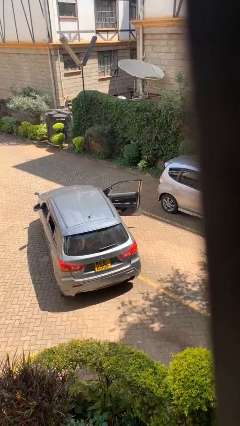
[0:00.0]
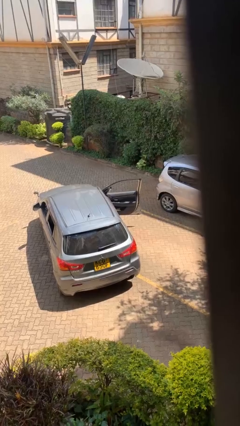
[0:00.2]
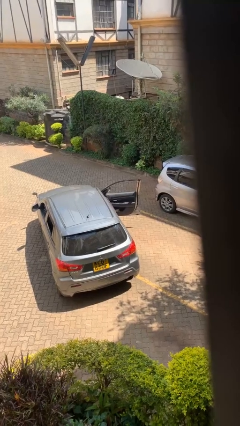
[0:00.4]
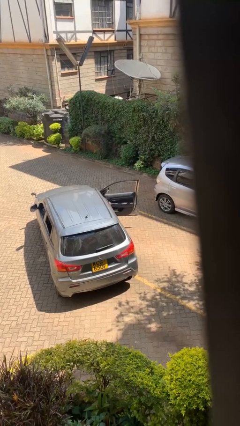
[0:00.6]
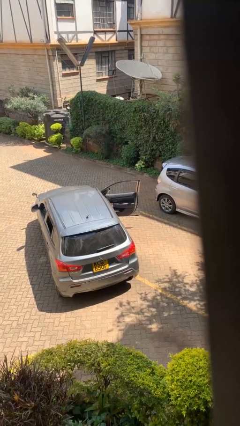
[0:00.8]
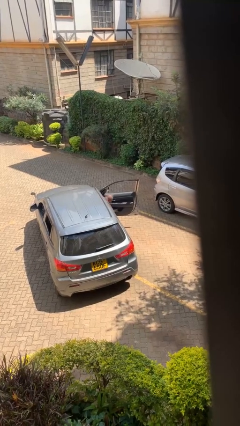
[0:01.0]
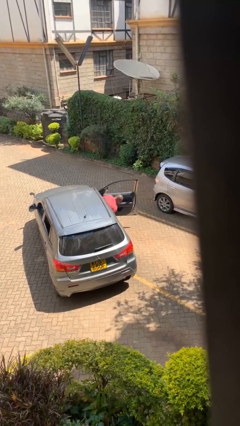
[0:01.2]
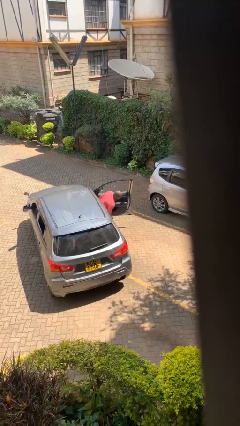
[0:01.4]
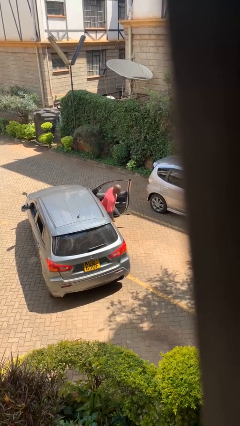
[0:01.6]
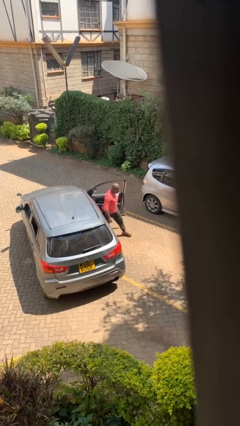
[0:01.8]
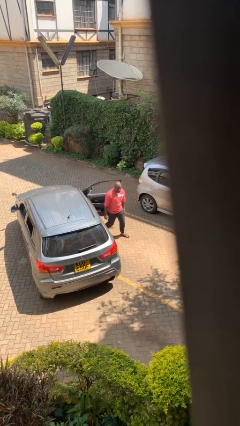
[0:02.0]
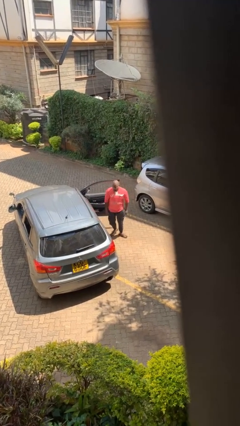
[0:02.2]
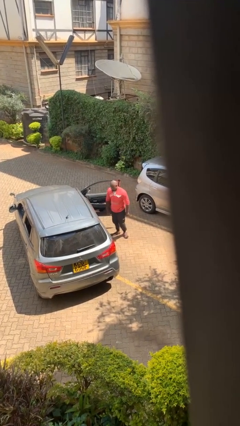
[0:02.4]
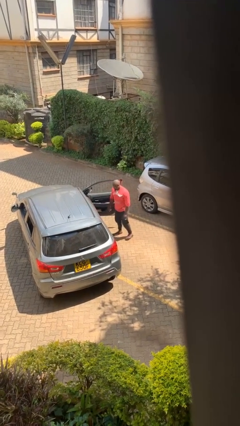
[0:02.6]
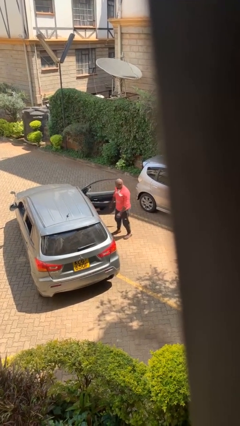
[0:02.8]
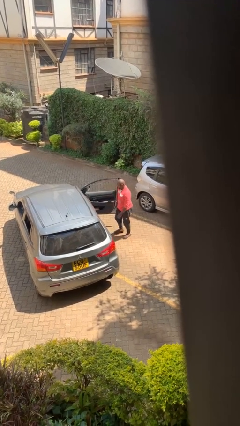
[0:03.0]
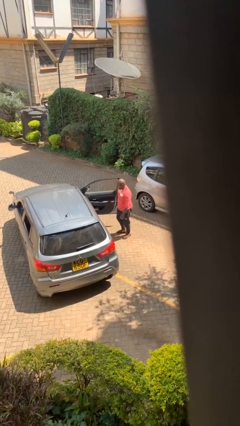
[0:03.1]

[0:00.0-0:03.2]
person exits car

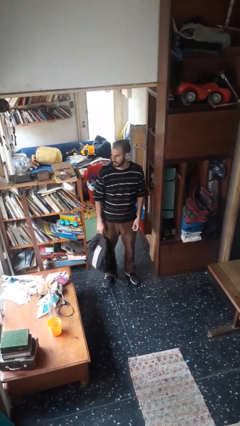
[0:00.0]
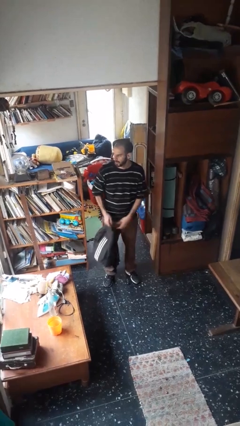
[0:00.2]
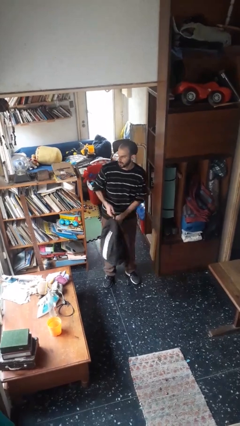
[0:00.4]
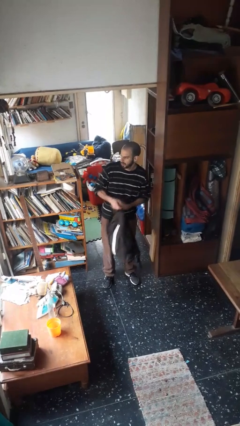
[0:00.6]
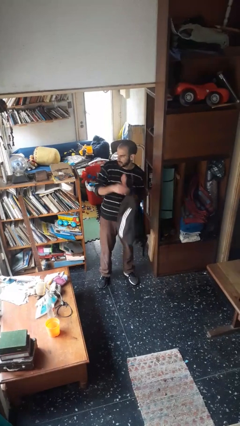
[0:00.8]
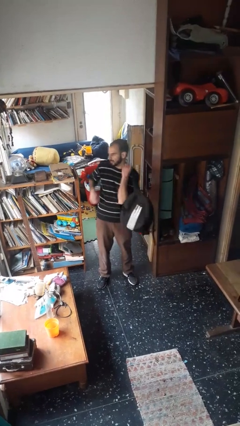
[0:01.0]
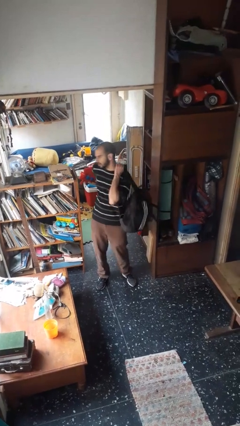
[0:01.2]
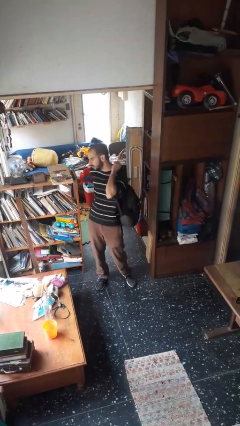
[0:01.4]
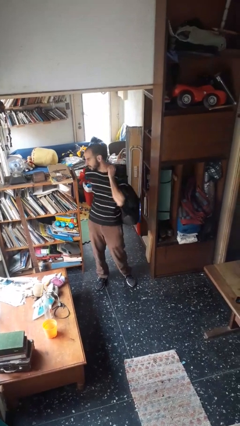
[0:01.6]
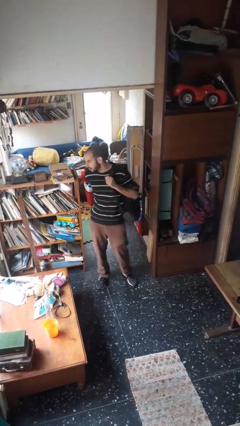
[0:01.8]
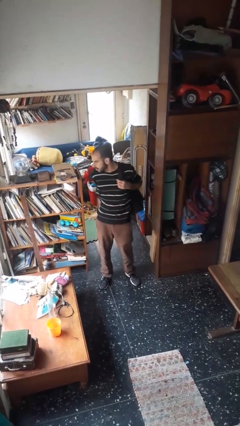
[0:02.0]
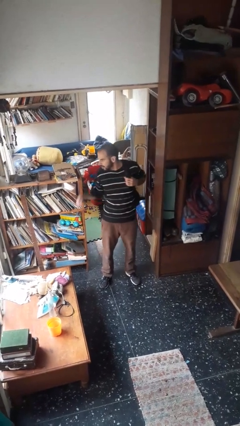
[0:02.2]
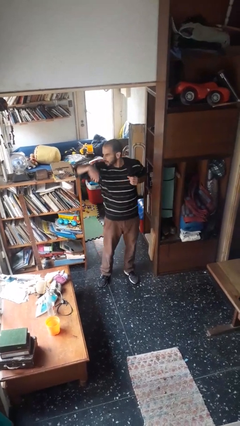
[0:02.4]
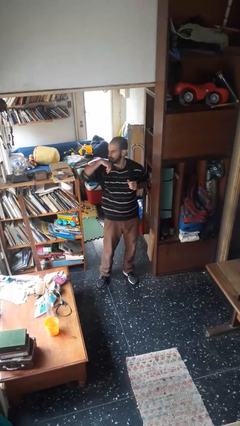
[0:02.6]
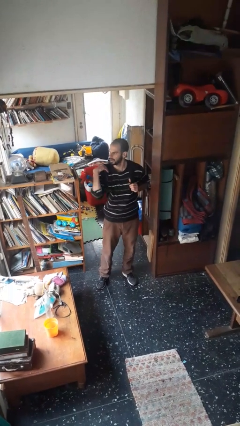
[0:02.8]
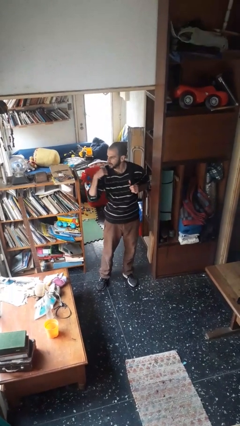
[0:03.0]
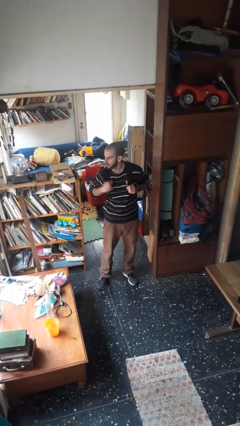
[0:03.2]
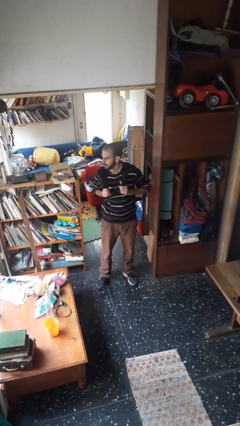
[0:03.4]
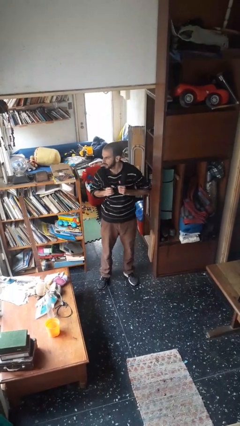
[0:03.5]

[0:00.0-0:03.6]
person puts on backpack

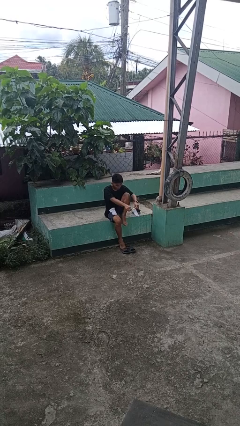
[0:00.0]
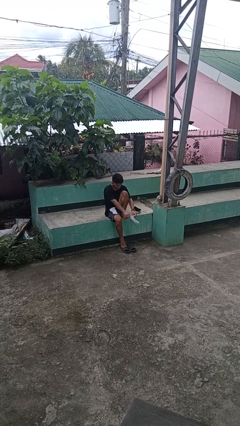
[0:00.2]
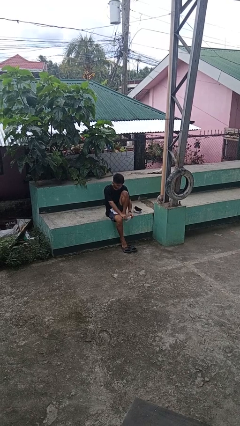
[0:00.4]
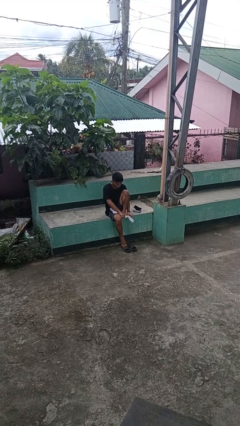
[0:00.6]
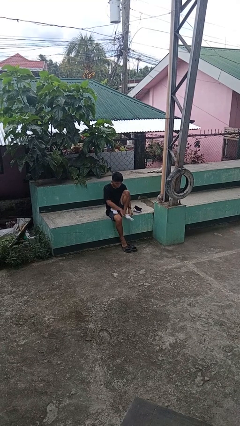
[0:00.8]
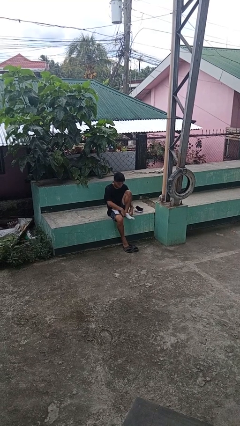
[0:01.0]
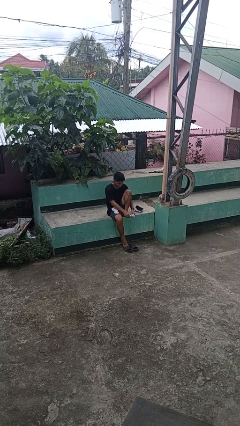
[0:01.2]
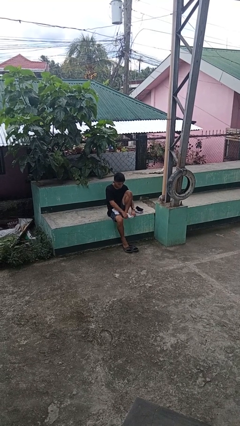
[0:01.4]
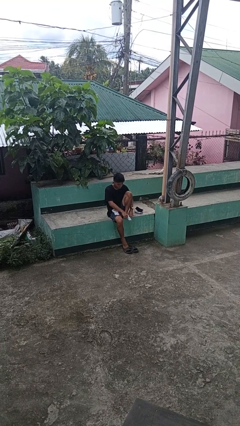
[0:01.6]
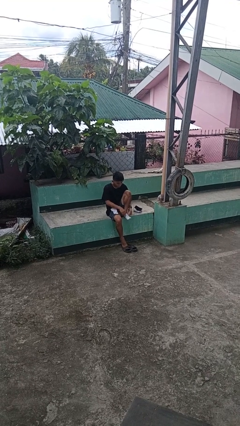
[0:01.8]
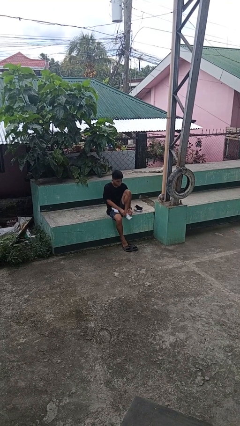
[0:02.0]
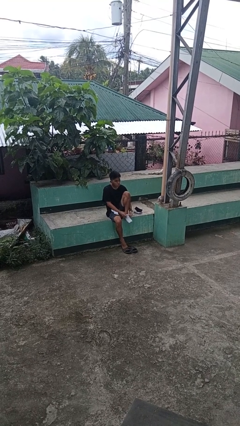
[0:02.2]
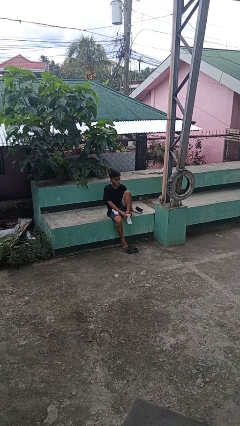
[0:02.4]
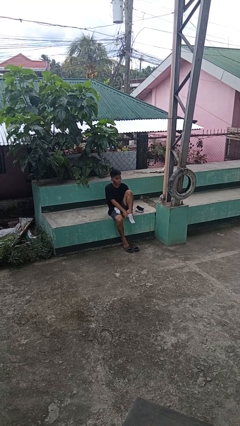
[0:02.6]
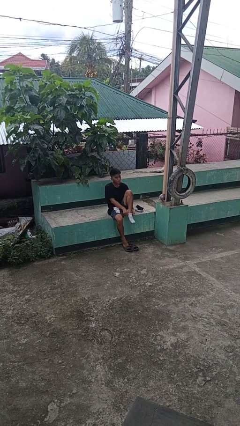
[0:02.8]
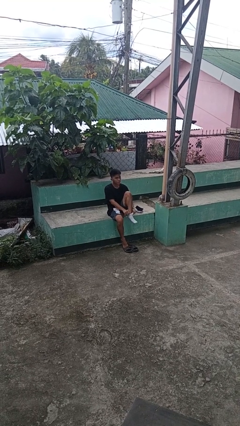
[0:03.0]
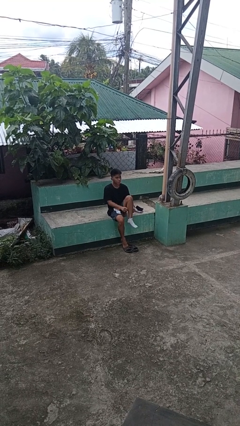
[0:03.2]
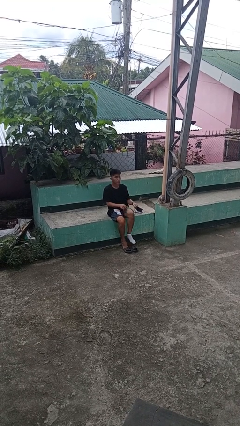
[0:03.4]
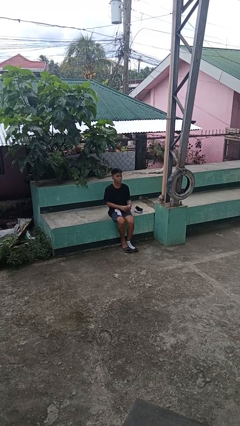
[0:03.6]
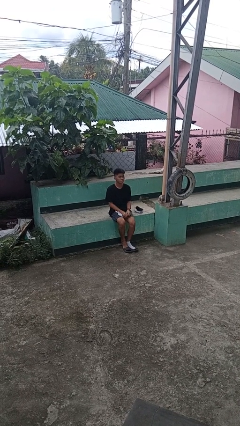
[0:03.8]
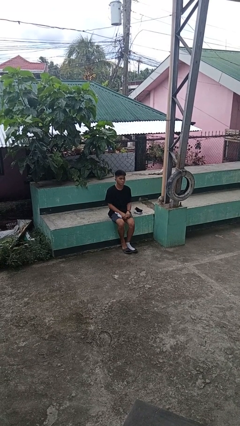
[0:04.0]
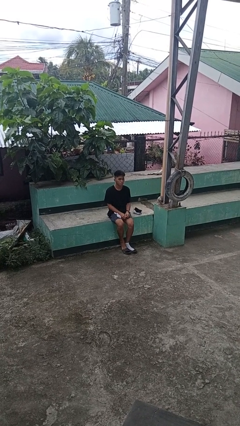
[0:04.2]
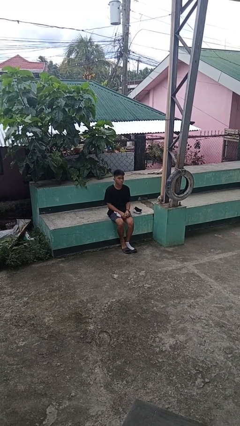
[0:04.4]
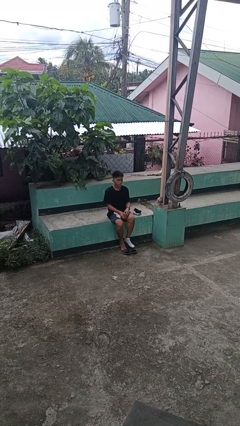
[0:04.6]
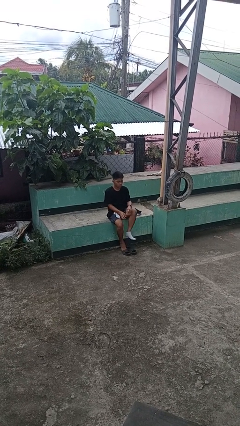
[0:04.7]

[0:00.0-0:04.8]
person puts on socks

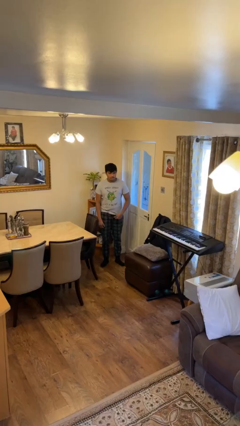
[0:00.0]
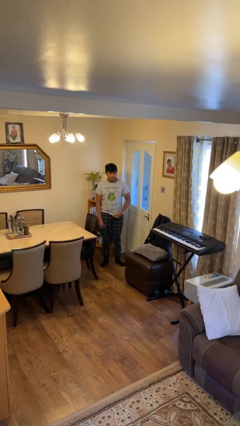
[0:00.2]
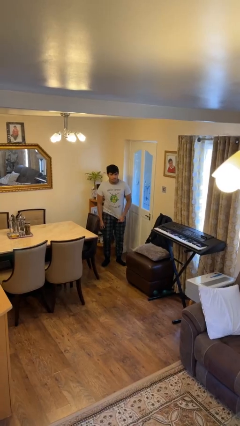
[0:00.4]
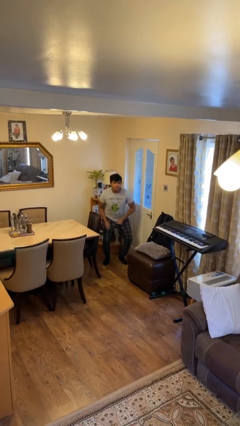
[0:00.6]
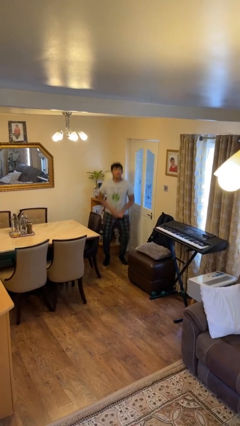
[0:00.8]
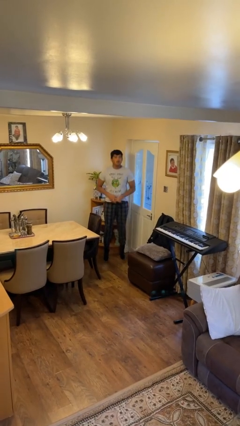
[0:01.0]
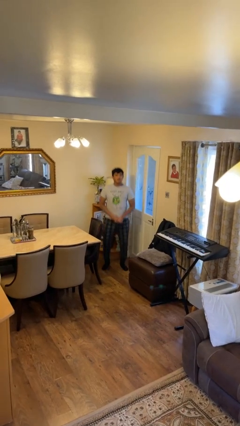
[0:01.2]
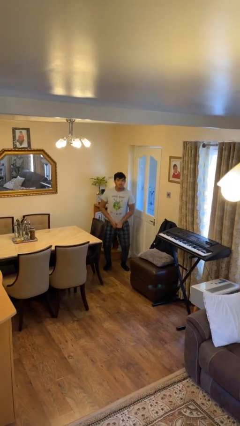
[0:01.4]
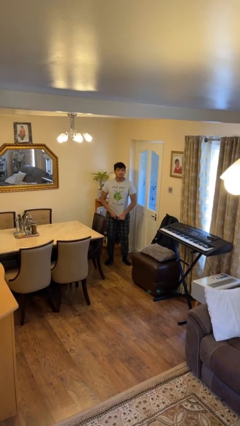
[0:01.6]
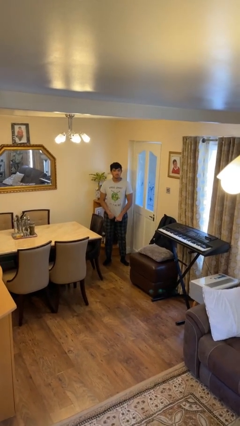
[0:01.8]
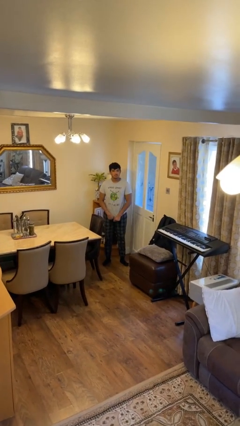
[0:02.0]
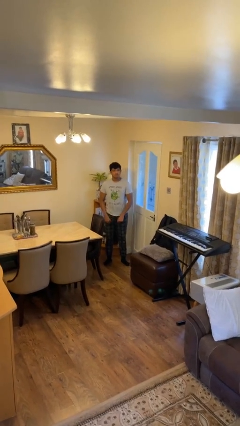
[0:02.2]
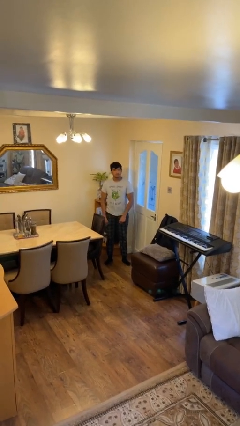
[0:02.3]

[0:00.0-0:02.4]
person jumps

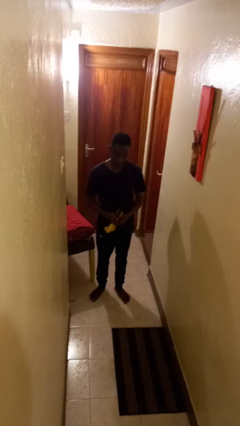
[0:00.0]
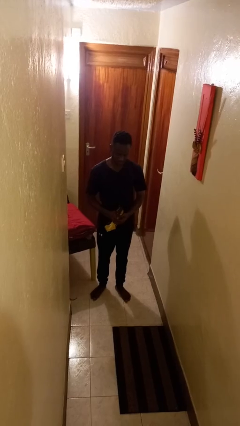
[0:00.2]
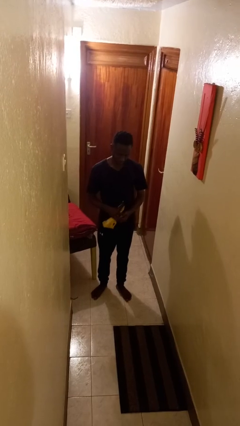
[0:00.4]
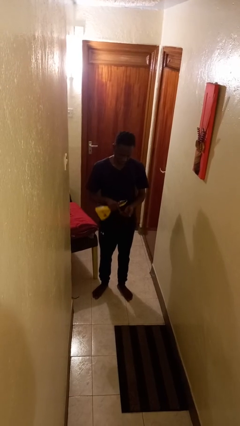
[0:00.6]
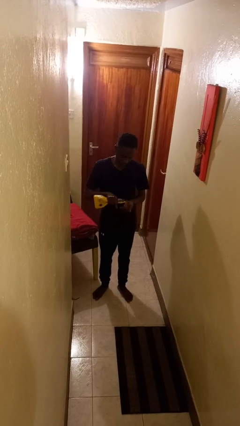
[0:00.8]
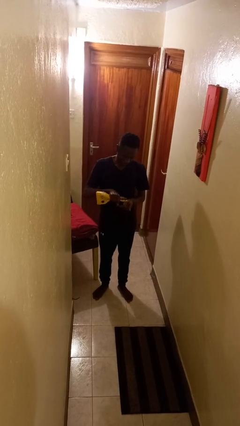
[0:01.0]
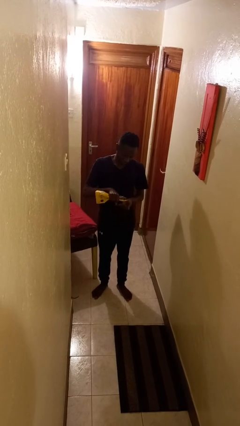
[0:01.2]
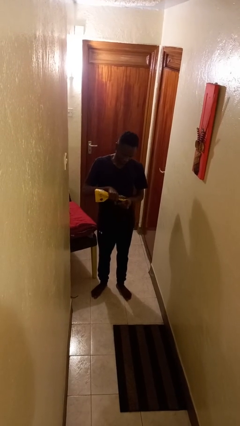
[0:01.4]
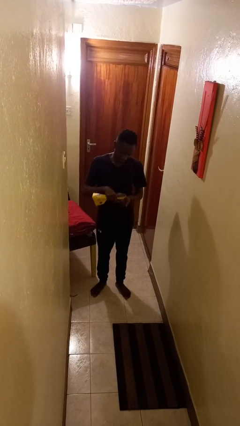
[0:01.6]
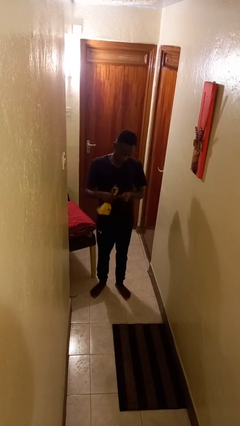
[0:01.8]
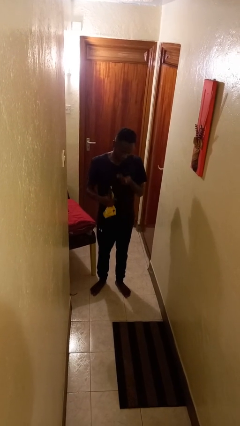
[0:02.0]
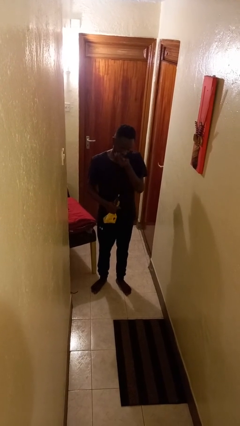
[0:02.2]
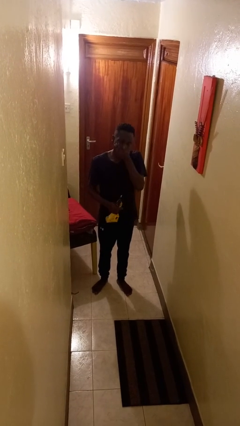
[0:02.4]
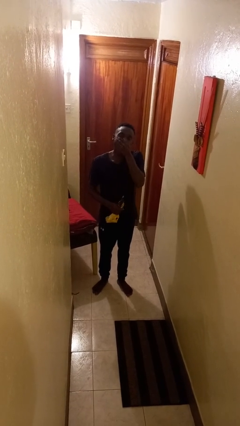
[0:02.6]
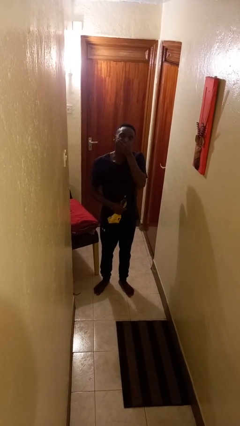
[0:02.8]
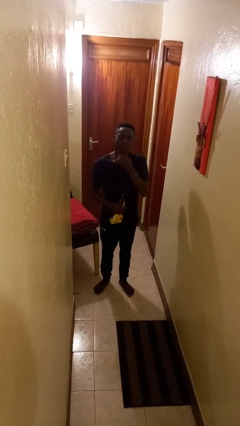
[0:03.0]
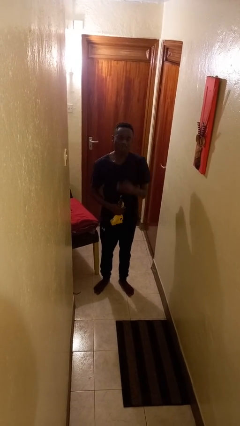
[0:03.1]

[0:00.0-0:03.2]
person eats snack from bag
